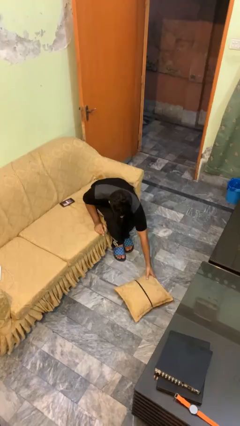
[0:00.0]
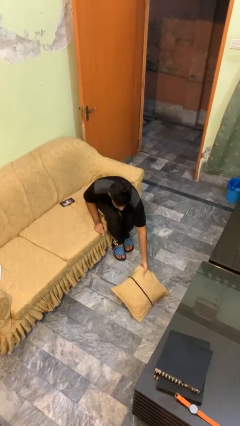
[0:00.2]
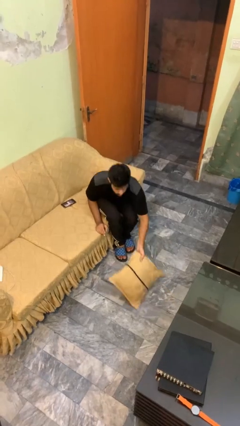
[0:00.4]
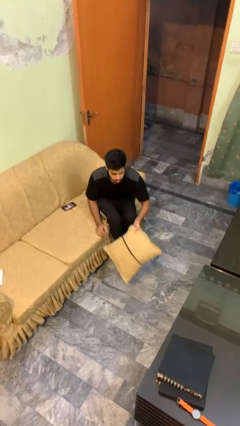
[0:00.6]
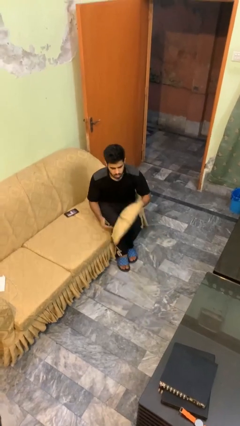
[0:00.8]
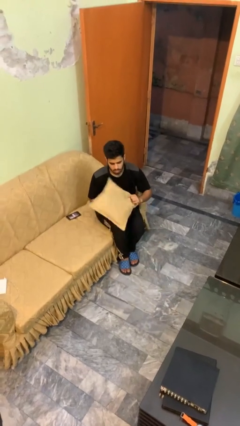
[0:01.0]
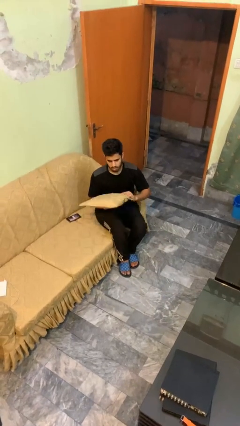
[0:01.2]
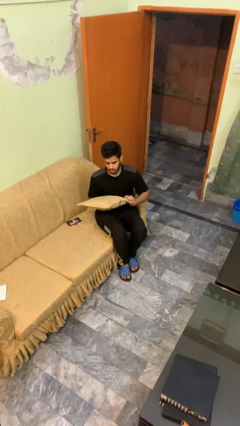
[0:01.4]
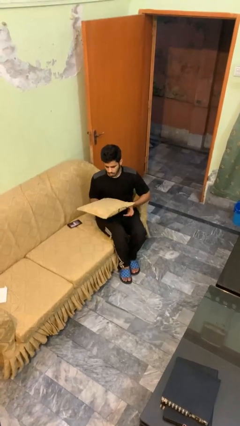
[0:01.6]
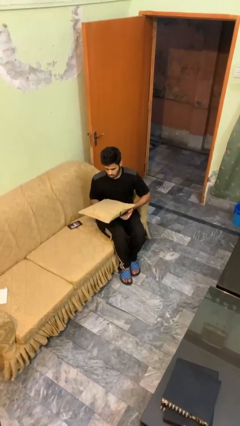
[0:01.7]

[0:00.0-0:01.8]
person picks up object from floor

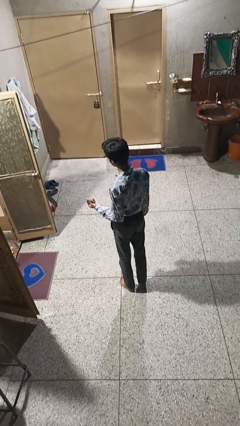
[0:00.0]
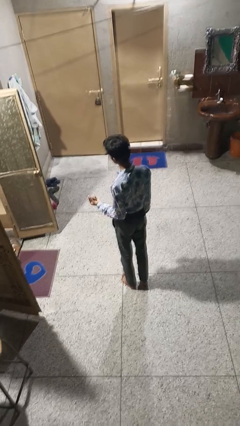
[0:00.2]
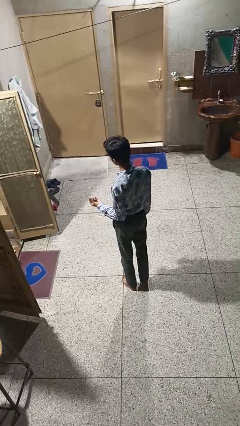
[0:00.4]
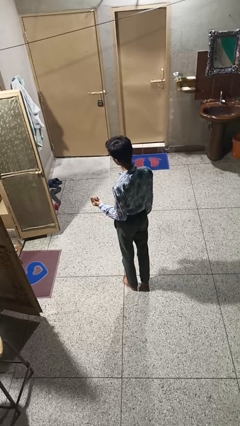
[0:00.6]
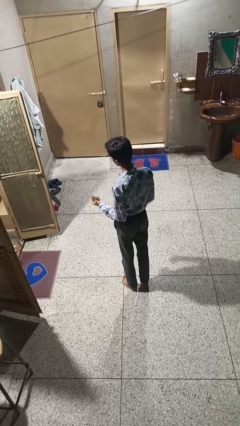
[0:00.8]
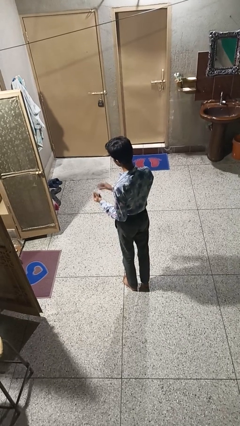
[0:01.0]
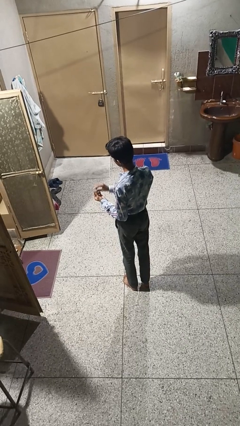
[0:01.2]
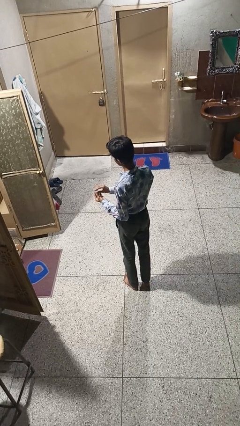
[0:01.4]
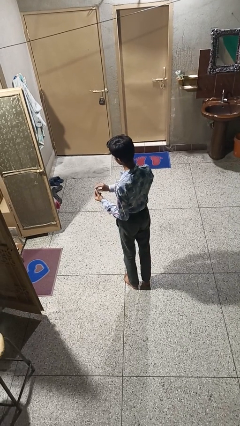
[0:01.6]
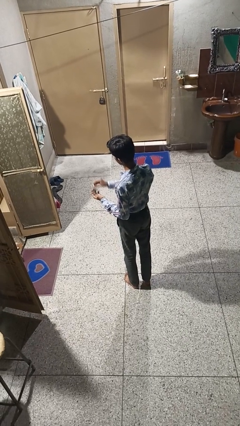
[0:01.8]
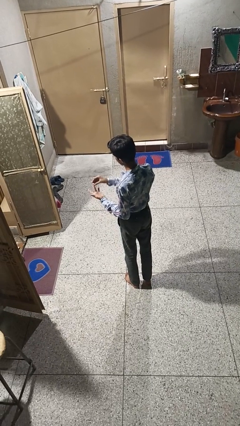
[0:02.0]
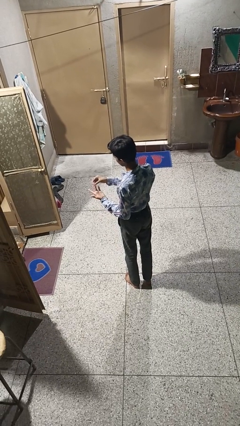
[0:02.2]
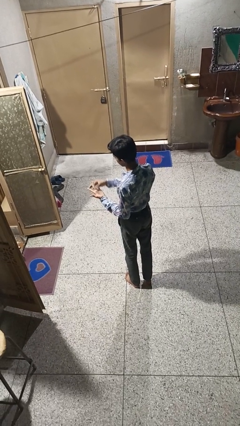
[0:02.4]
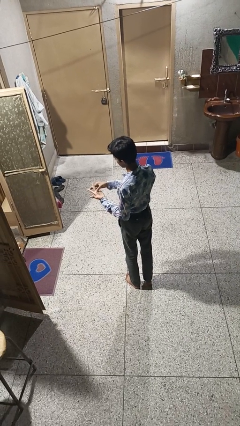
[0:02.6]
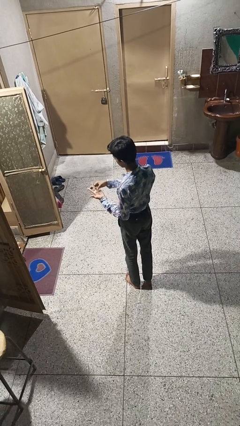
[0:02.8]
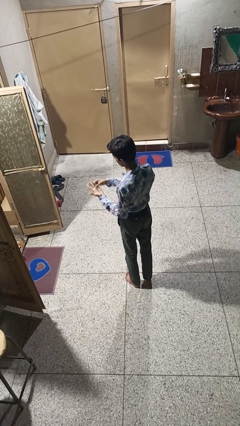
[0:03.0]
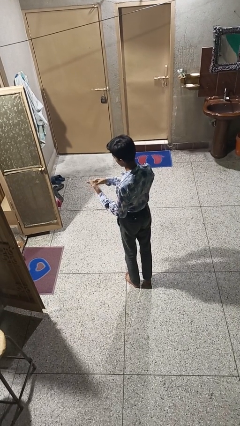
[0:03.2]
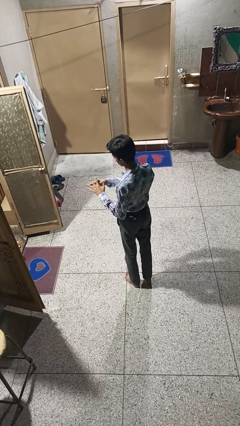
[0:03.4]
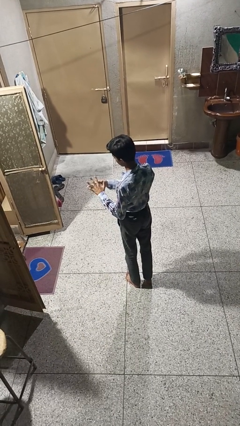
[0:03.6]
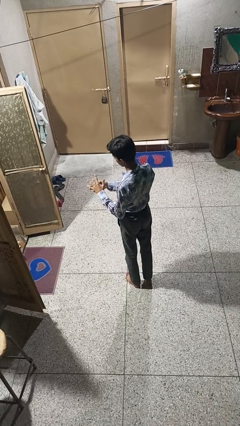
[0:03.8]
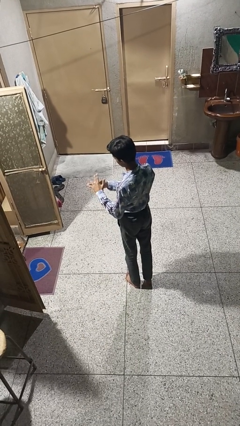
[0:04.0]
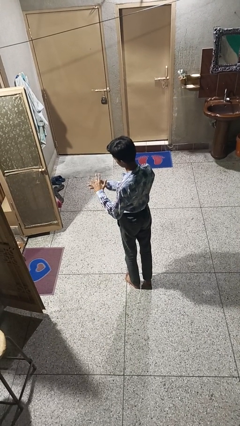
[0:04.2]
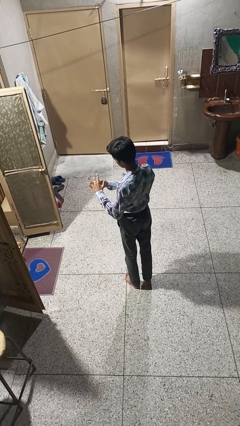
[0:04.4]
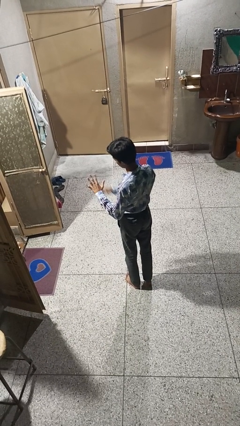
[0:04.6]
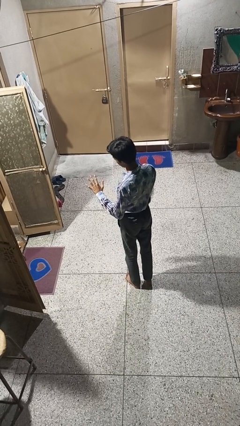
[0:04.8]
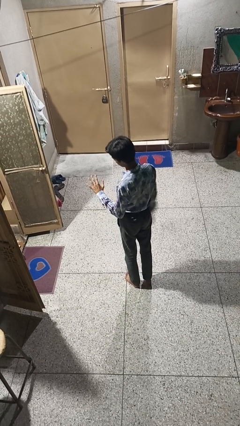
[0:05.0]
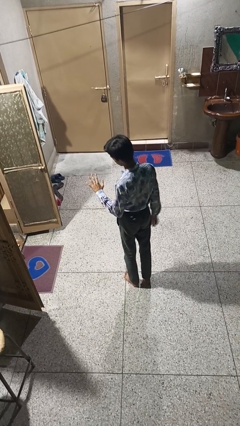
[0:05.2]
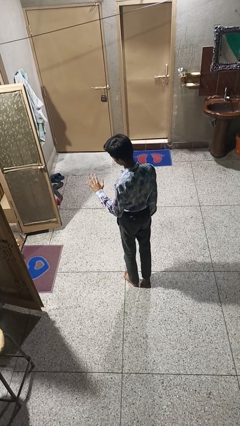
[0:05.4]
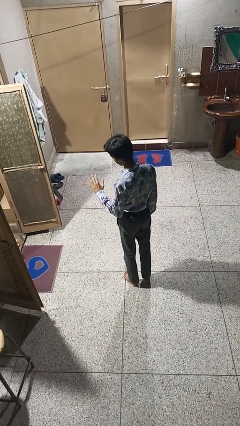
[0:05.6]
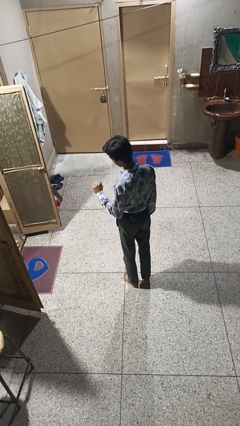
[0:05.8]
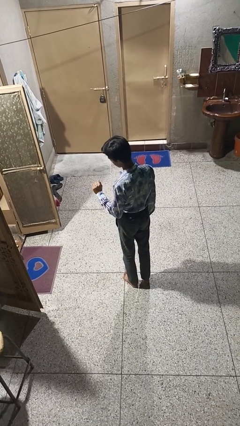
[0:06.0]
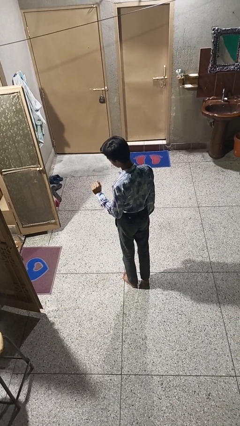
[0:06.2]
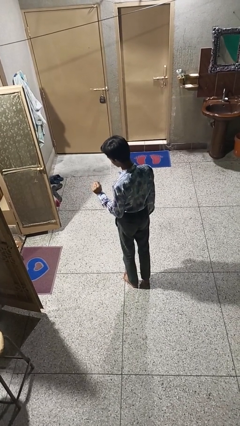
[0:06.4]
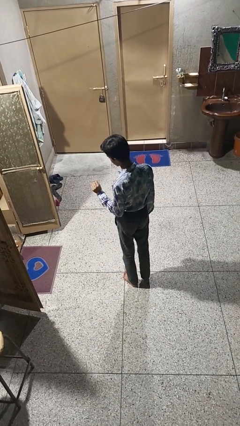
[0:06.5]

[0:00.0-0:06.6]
person puts on ring

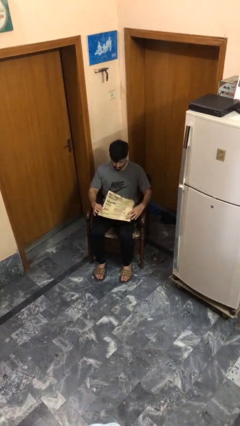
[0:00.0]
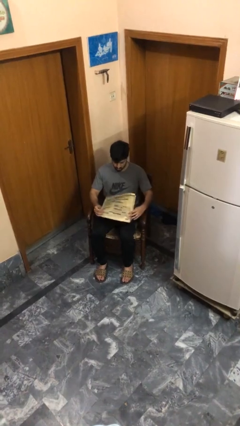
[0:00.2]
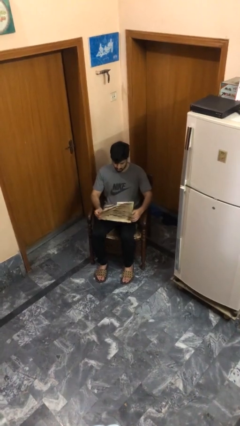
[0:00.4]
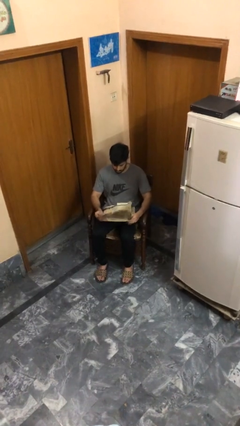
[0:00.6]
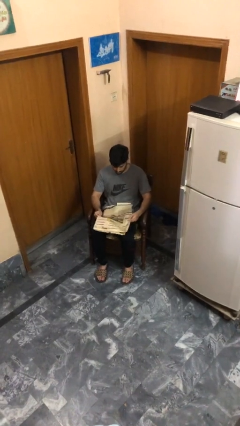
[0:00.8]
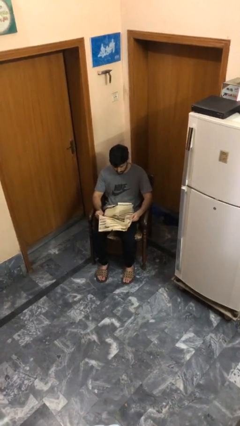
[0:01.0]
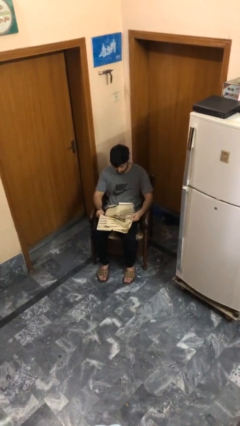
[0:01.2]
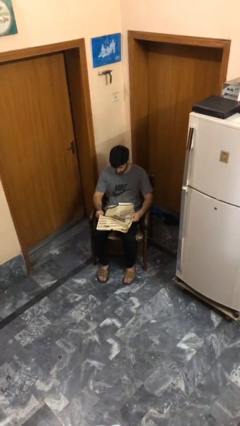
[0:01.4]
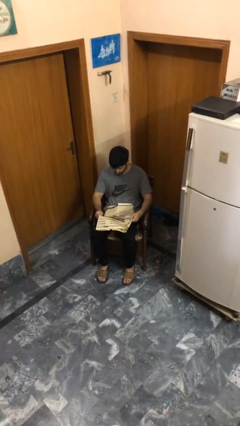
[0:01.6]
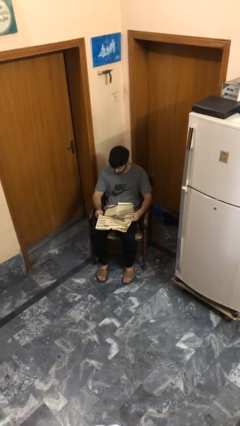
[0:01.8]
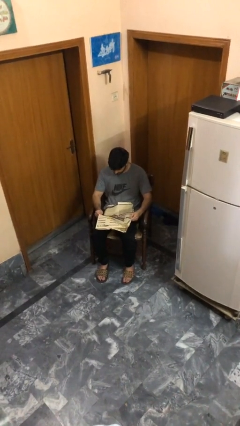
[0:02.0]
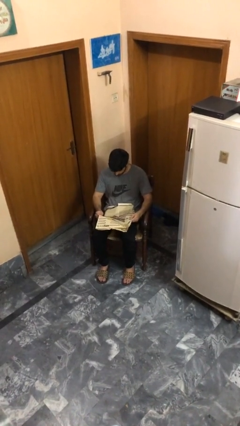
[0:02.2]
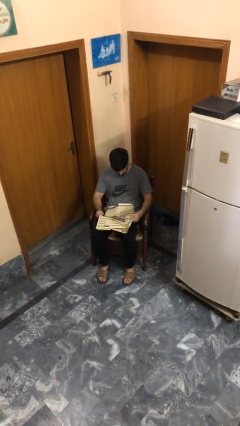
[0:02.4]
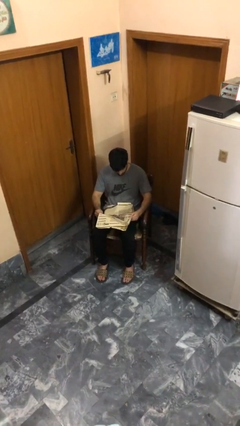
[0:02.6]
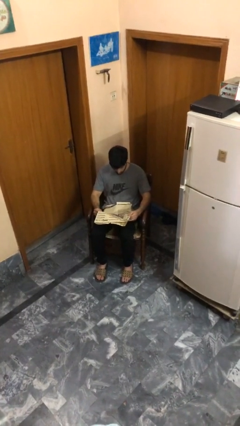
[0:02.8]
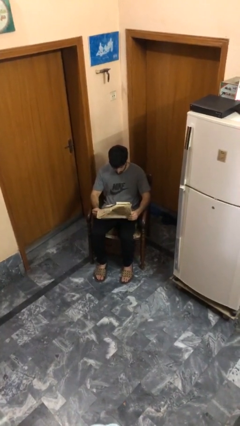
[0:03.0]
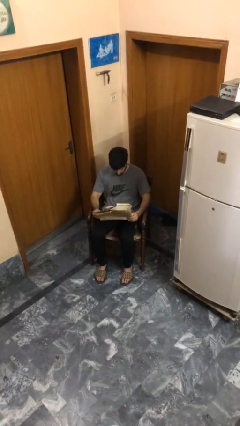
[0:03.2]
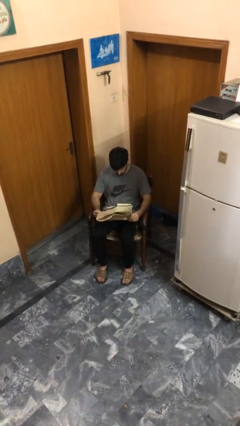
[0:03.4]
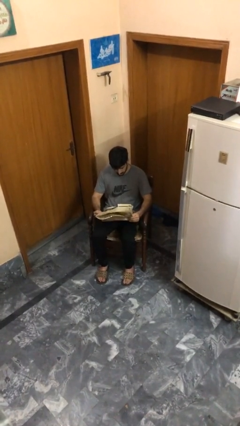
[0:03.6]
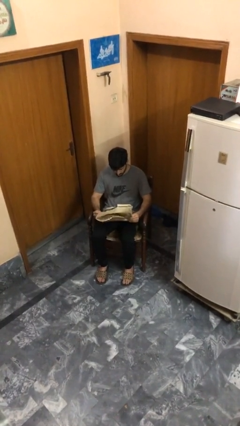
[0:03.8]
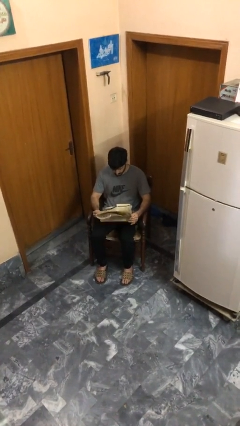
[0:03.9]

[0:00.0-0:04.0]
person reads newspaper

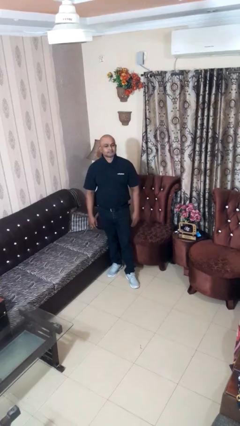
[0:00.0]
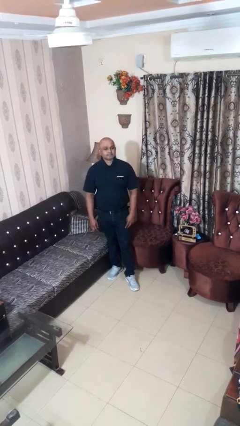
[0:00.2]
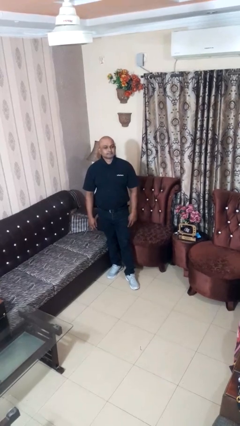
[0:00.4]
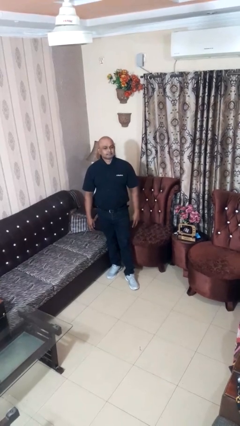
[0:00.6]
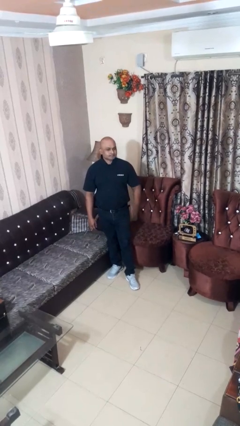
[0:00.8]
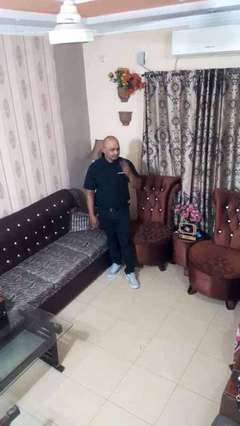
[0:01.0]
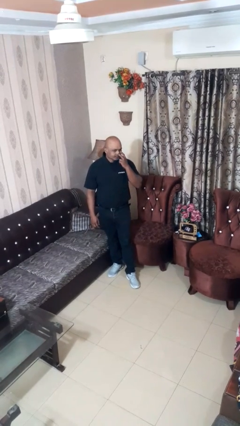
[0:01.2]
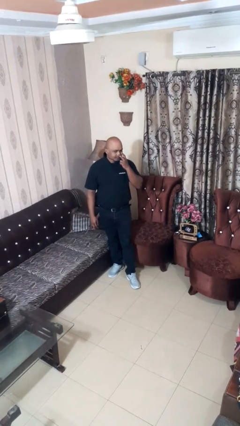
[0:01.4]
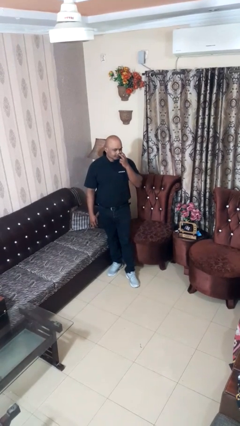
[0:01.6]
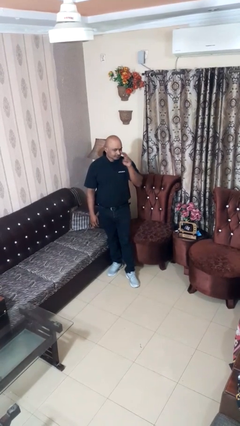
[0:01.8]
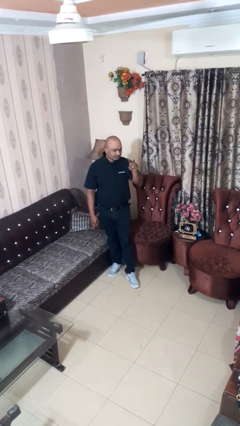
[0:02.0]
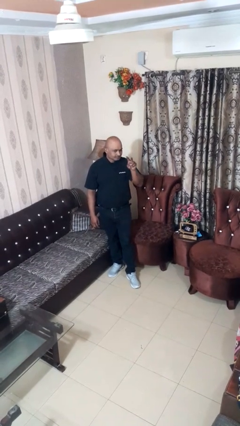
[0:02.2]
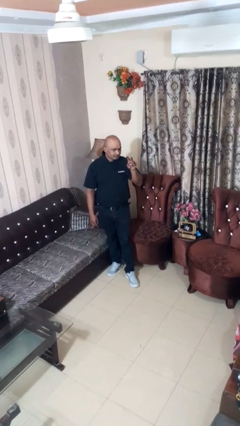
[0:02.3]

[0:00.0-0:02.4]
person gestures watch closely

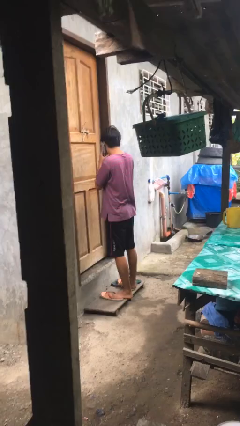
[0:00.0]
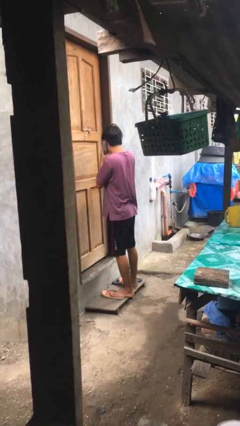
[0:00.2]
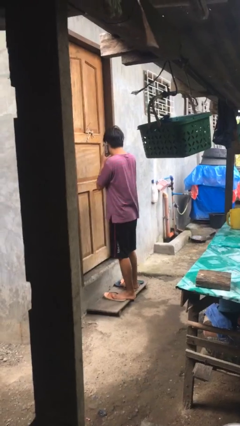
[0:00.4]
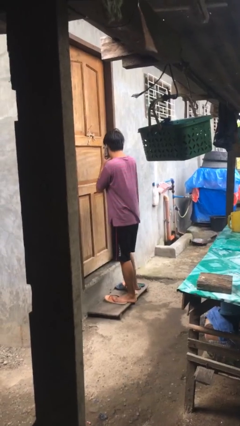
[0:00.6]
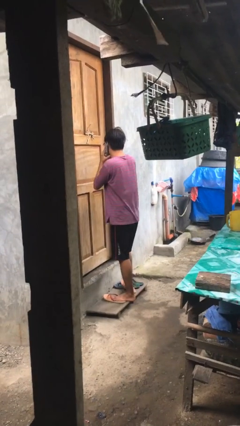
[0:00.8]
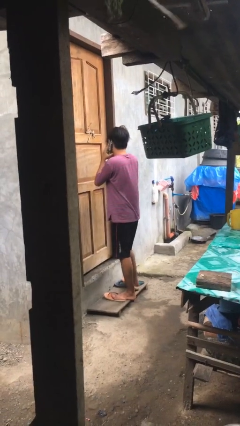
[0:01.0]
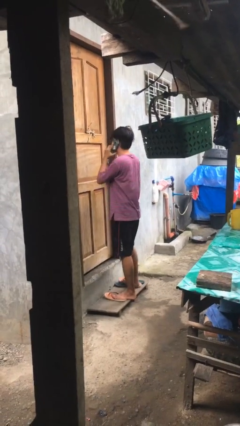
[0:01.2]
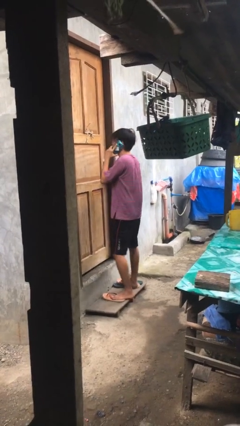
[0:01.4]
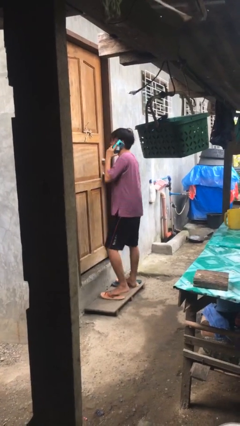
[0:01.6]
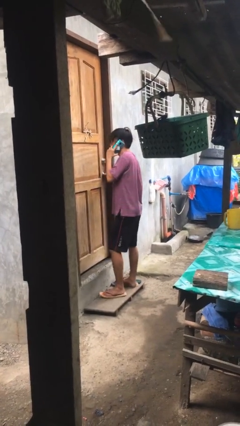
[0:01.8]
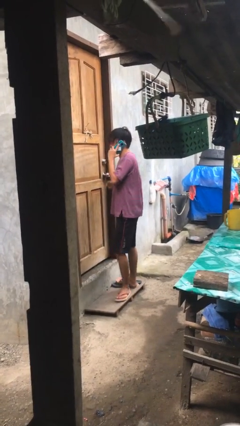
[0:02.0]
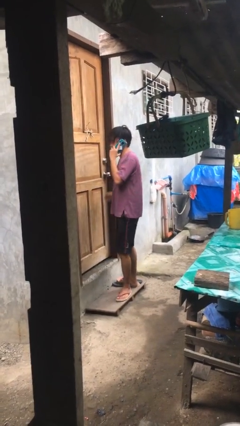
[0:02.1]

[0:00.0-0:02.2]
person closes facility door

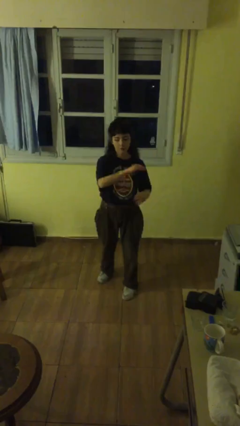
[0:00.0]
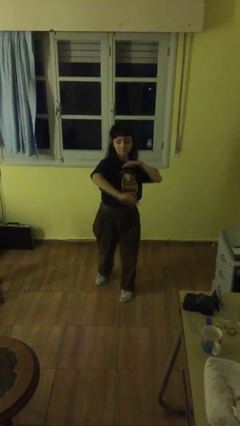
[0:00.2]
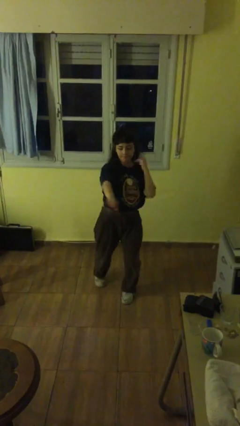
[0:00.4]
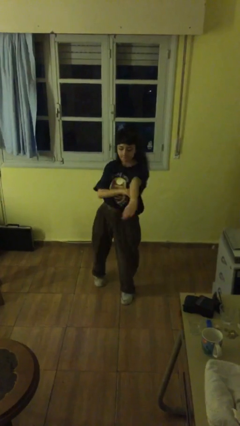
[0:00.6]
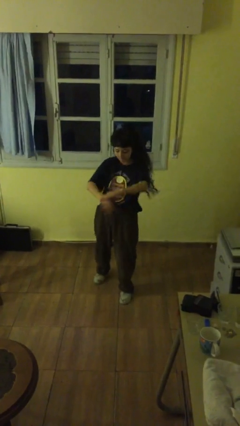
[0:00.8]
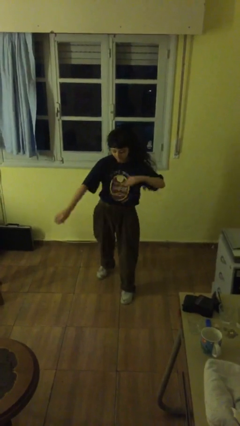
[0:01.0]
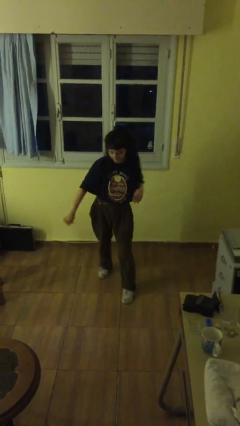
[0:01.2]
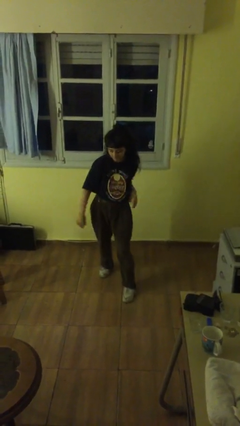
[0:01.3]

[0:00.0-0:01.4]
person karate chop
